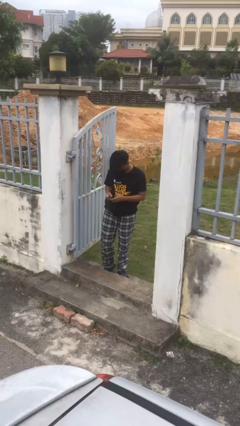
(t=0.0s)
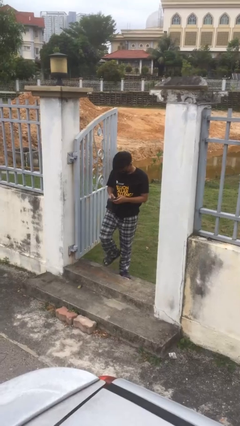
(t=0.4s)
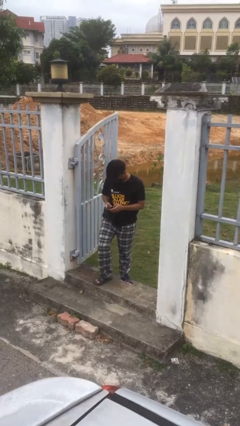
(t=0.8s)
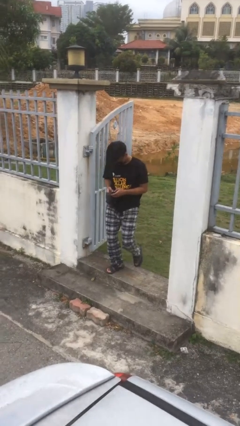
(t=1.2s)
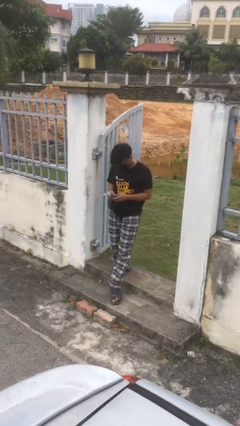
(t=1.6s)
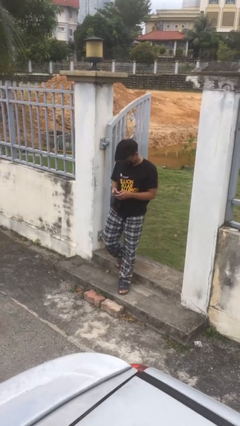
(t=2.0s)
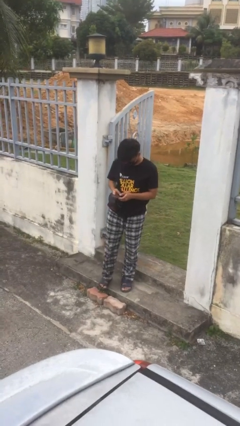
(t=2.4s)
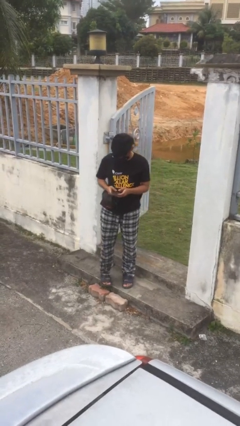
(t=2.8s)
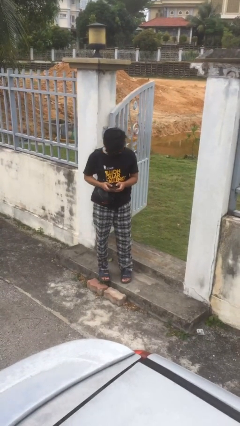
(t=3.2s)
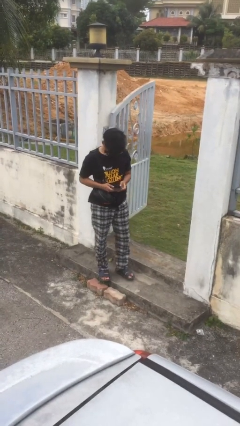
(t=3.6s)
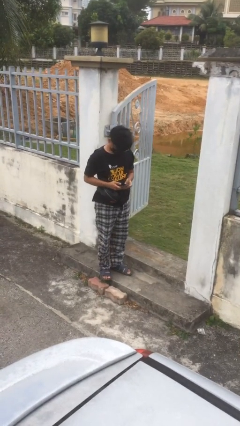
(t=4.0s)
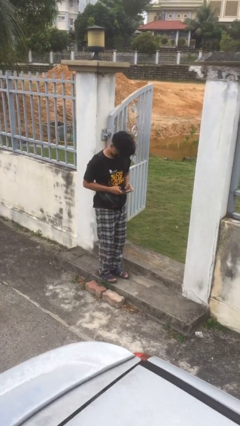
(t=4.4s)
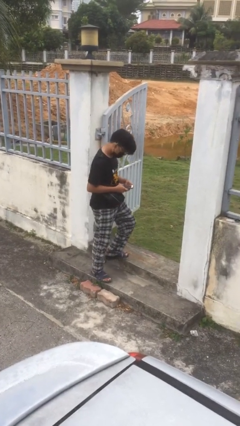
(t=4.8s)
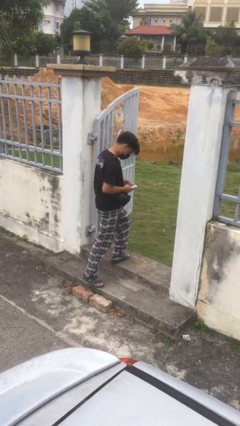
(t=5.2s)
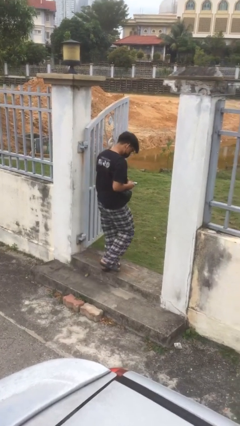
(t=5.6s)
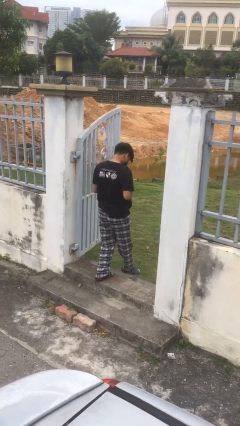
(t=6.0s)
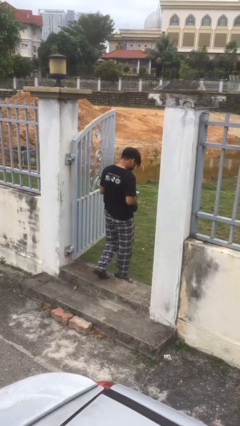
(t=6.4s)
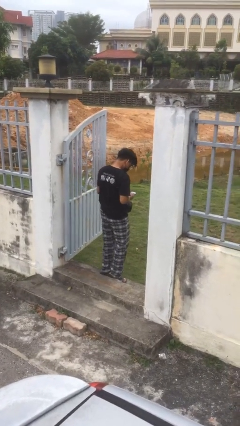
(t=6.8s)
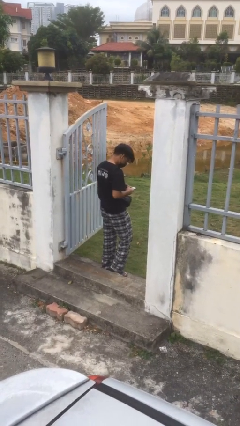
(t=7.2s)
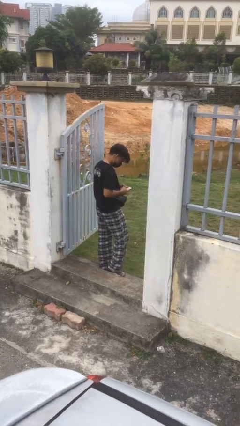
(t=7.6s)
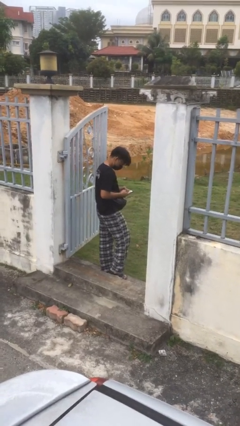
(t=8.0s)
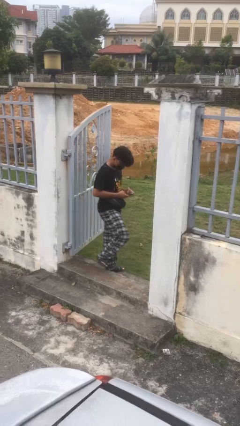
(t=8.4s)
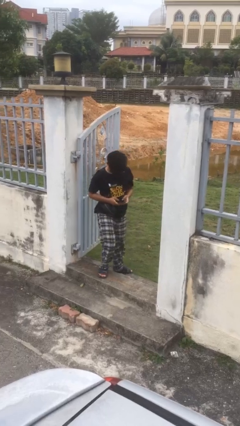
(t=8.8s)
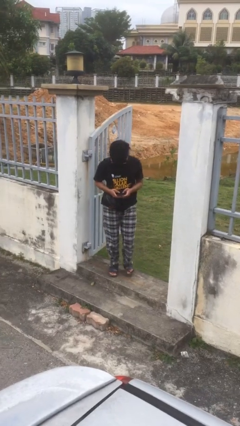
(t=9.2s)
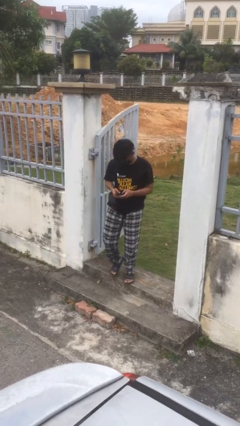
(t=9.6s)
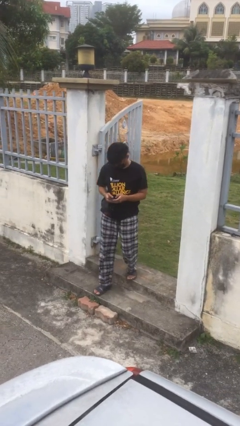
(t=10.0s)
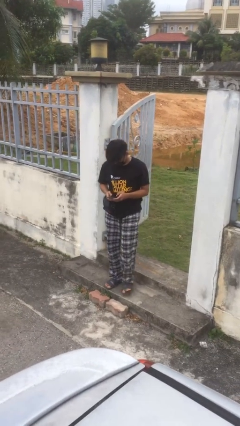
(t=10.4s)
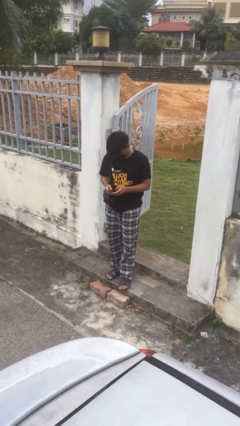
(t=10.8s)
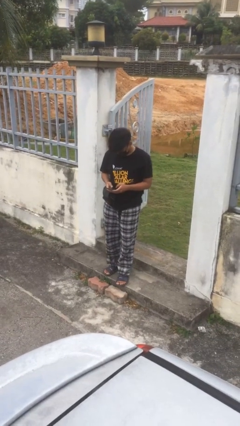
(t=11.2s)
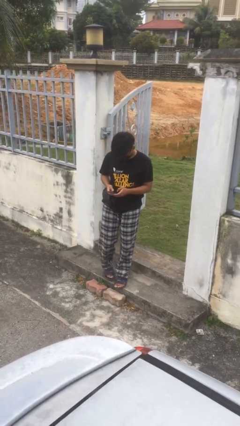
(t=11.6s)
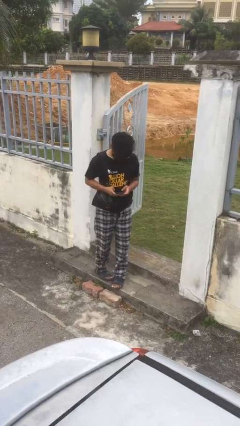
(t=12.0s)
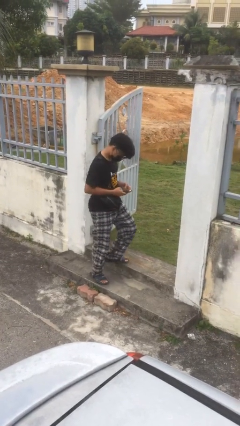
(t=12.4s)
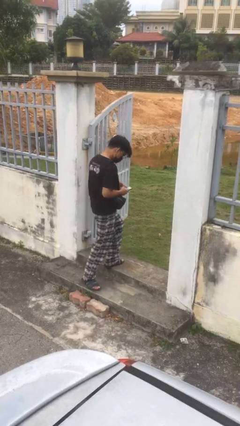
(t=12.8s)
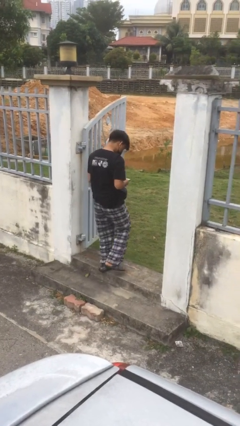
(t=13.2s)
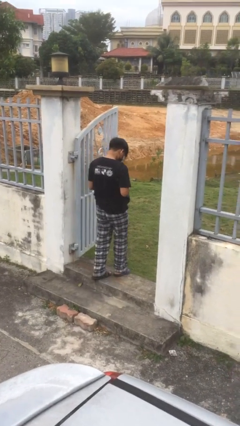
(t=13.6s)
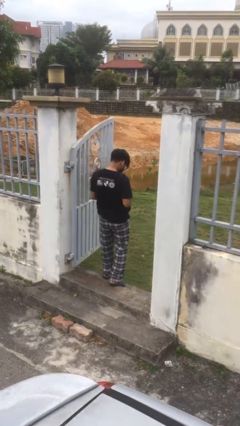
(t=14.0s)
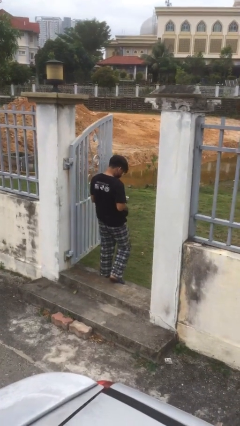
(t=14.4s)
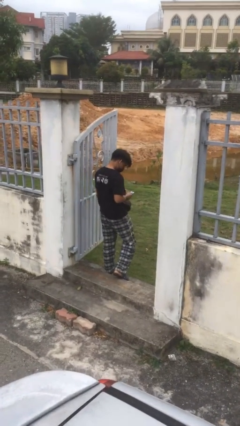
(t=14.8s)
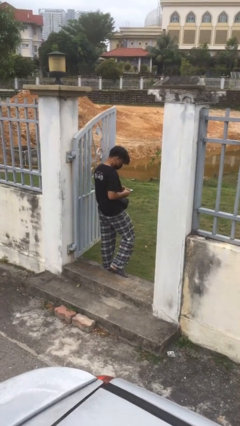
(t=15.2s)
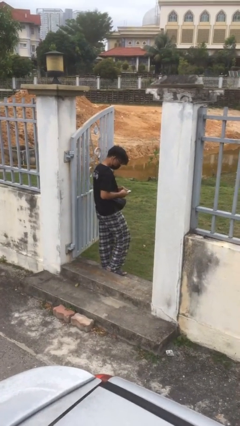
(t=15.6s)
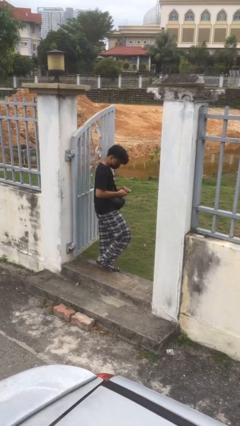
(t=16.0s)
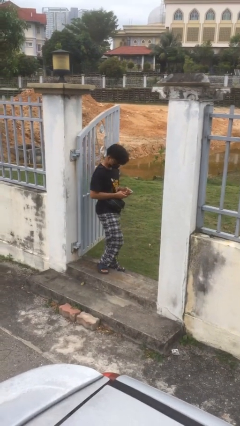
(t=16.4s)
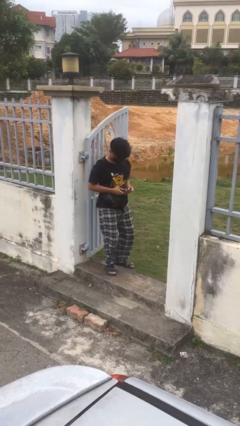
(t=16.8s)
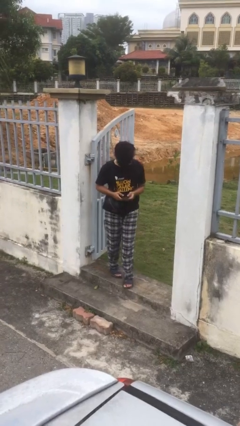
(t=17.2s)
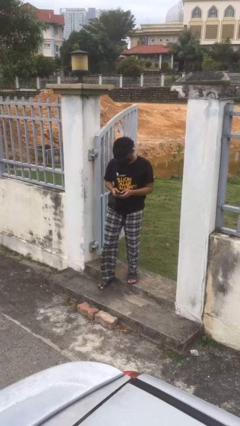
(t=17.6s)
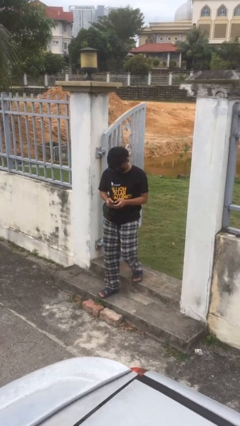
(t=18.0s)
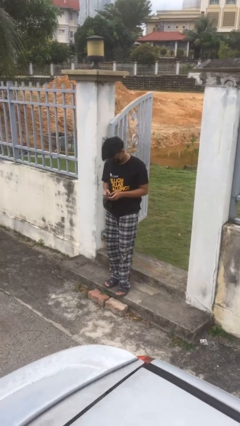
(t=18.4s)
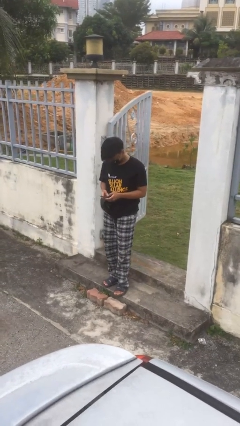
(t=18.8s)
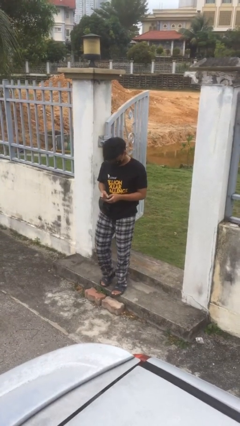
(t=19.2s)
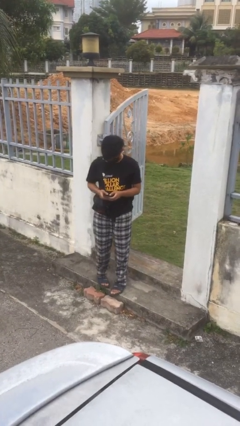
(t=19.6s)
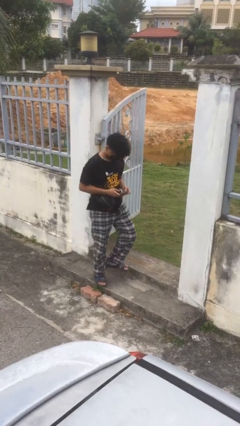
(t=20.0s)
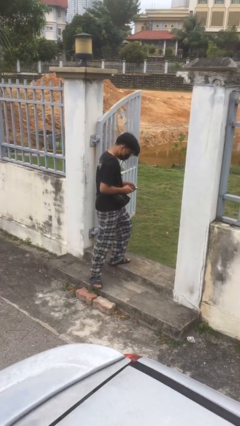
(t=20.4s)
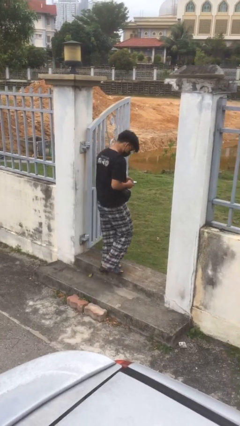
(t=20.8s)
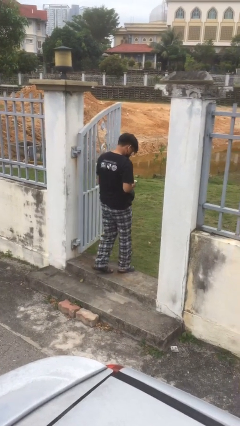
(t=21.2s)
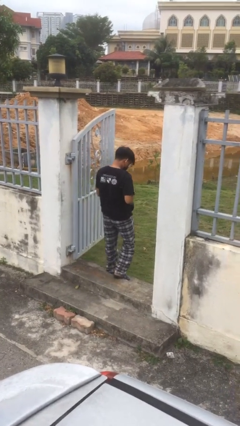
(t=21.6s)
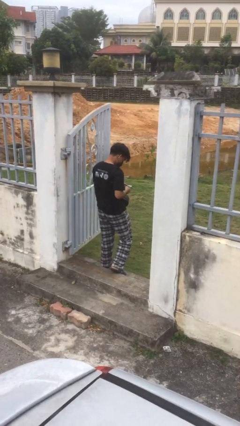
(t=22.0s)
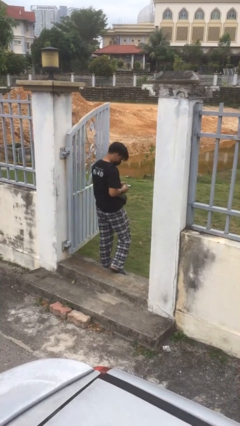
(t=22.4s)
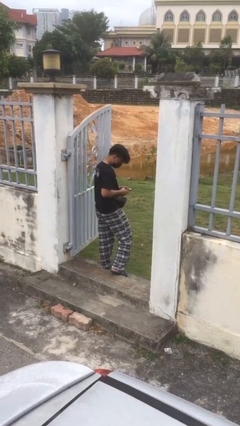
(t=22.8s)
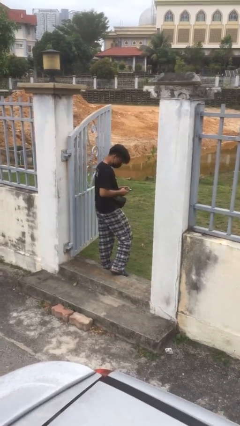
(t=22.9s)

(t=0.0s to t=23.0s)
person texts on phone

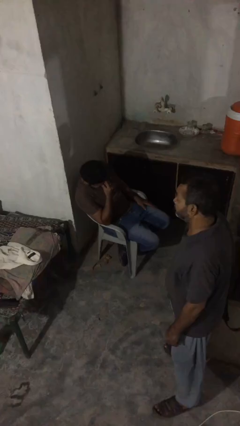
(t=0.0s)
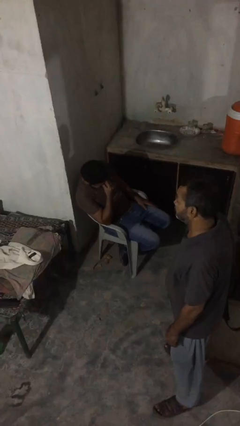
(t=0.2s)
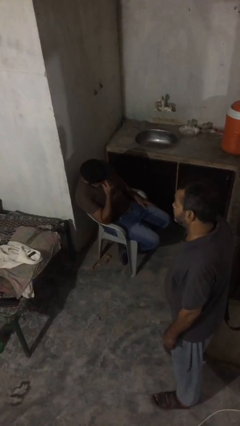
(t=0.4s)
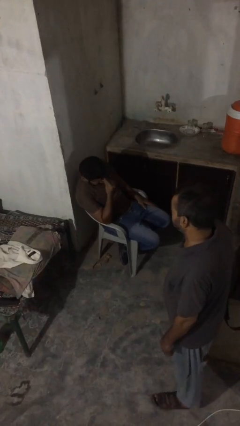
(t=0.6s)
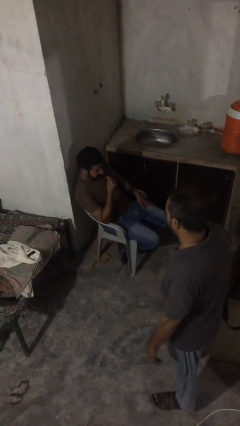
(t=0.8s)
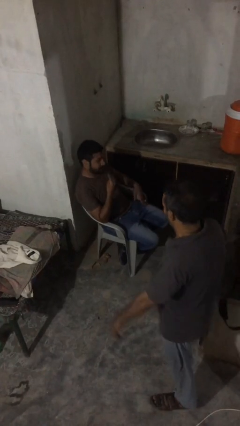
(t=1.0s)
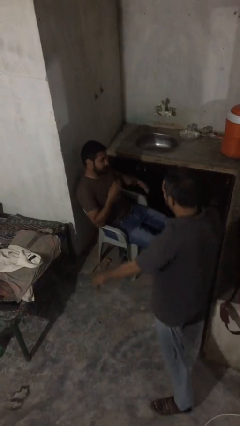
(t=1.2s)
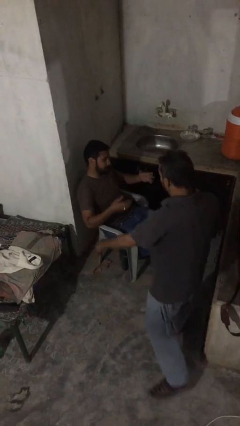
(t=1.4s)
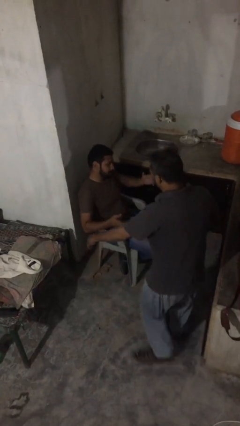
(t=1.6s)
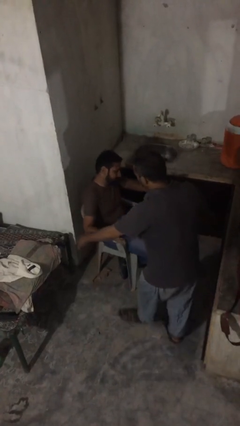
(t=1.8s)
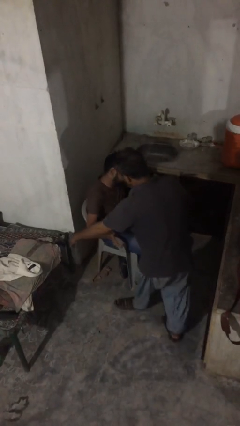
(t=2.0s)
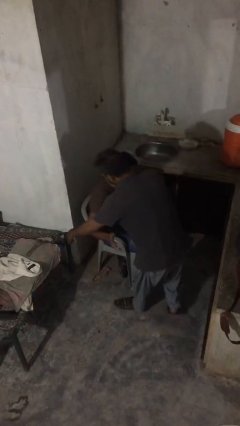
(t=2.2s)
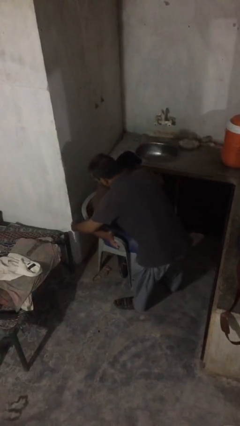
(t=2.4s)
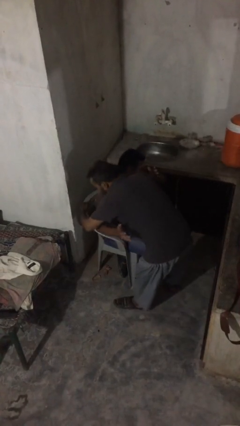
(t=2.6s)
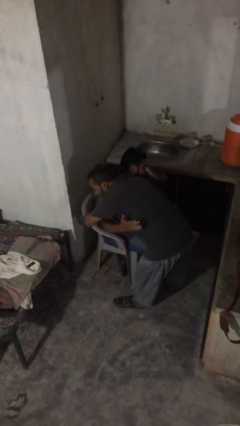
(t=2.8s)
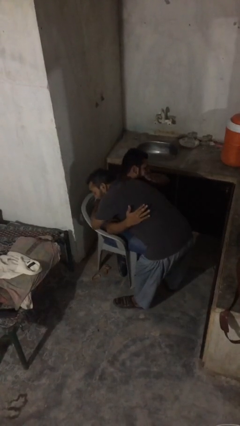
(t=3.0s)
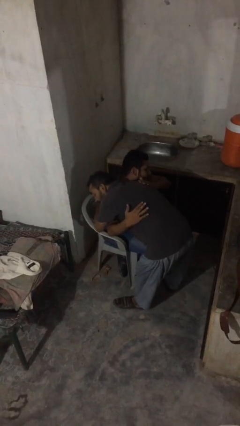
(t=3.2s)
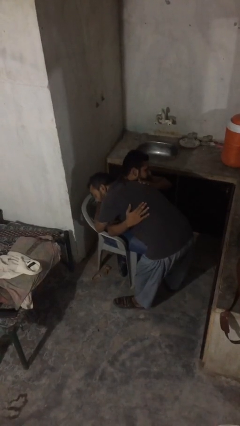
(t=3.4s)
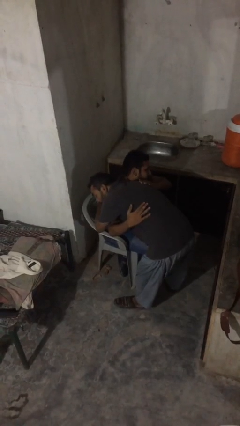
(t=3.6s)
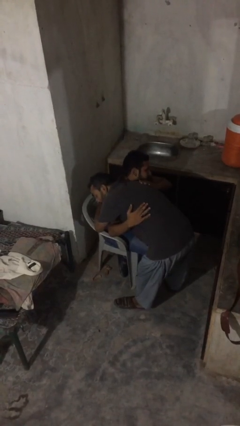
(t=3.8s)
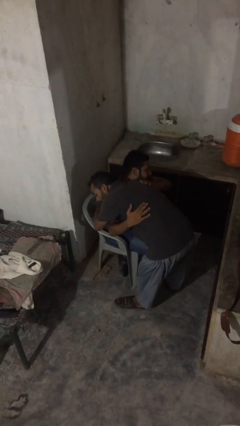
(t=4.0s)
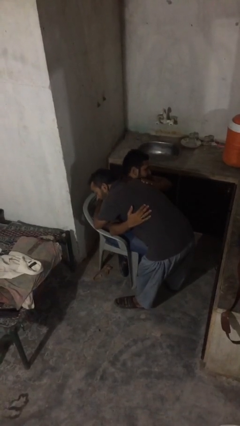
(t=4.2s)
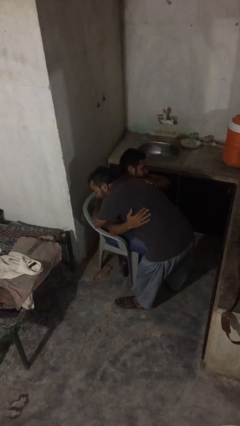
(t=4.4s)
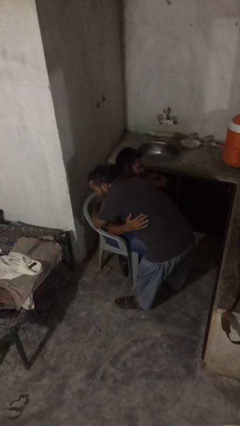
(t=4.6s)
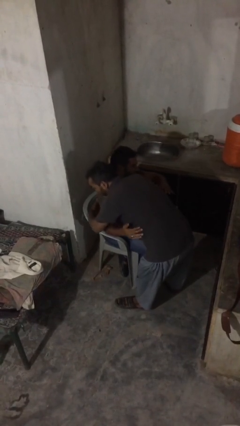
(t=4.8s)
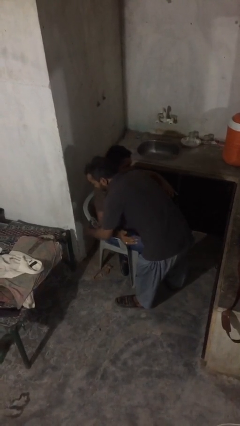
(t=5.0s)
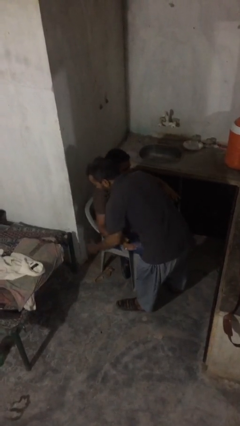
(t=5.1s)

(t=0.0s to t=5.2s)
person embraces person

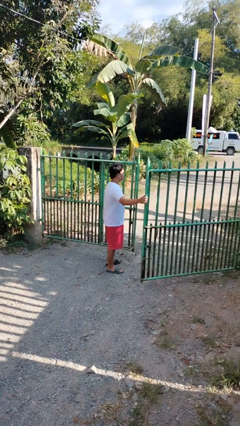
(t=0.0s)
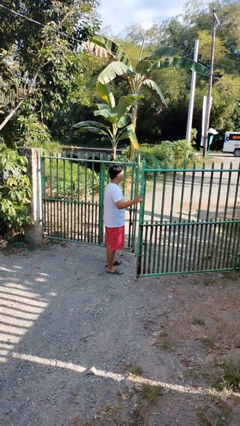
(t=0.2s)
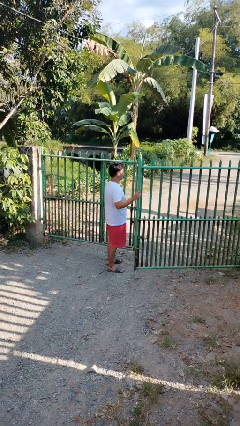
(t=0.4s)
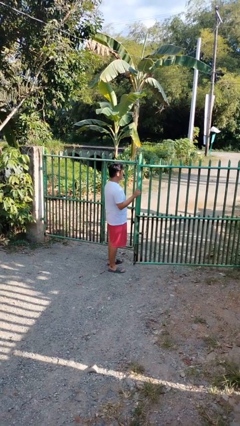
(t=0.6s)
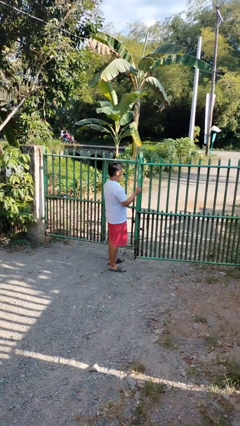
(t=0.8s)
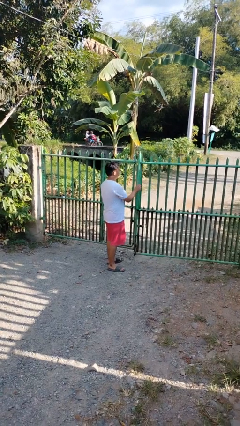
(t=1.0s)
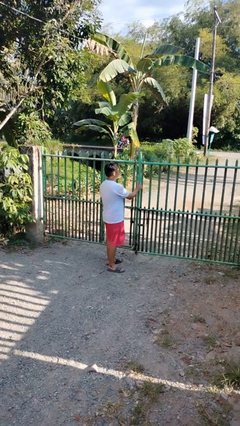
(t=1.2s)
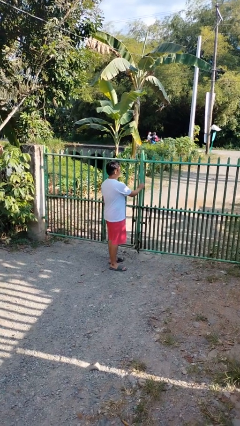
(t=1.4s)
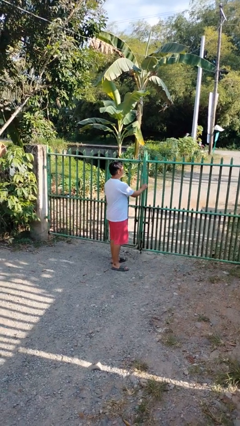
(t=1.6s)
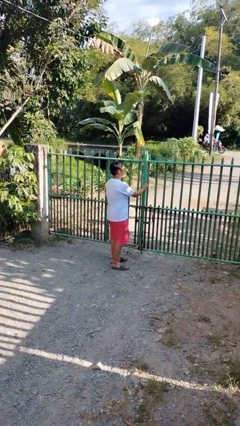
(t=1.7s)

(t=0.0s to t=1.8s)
person closes gate
